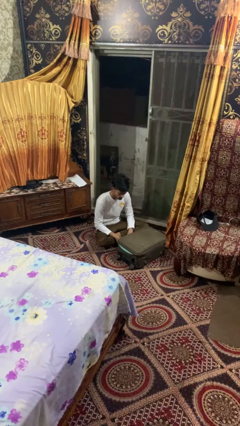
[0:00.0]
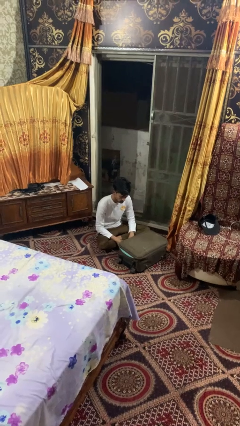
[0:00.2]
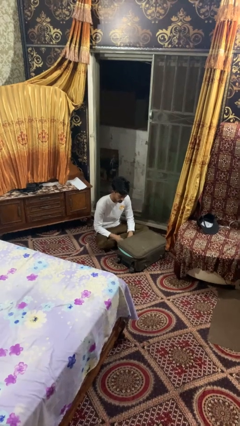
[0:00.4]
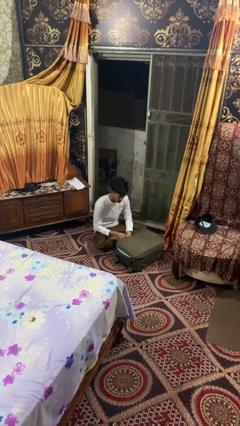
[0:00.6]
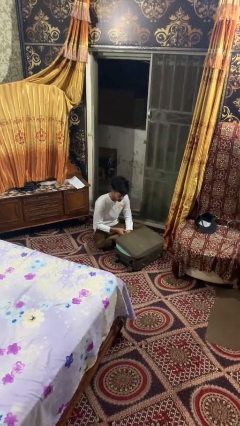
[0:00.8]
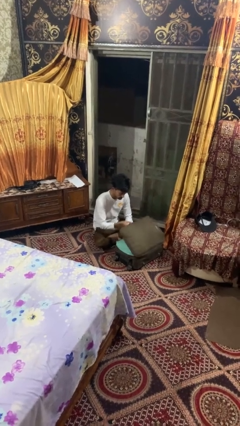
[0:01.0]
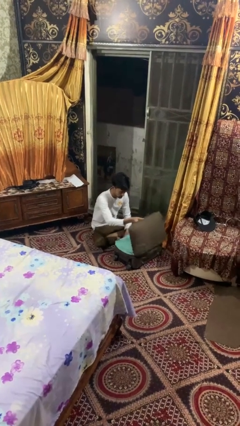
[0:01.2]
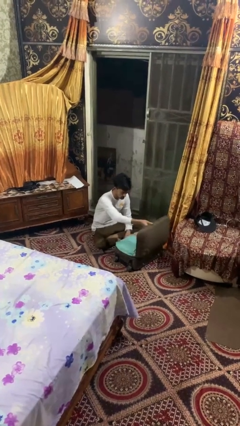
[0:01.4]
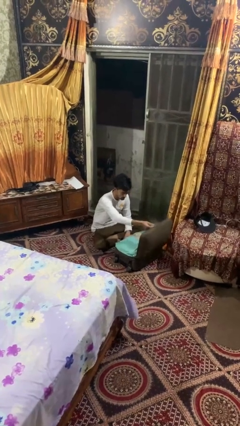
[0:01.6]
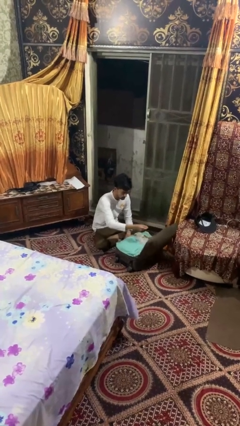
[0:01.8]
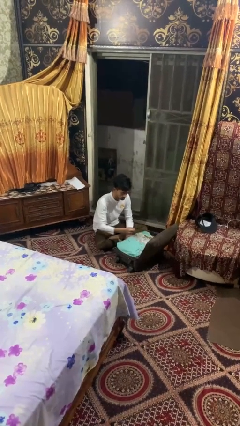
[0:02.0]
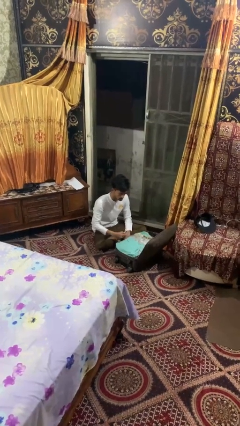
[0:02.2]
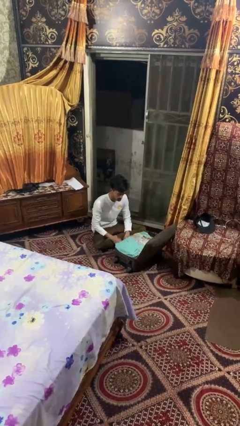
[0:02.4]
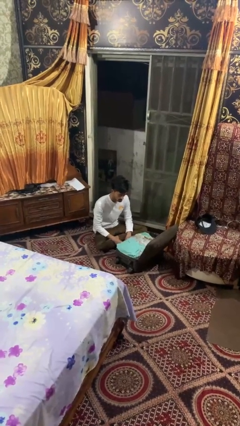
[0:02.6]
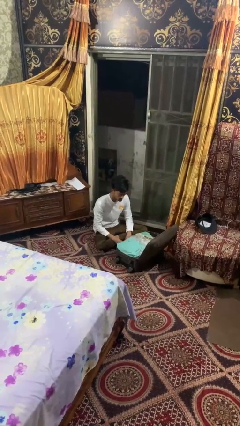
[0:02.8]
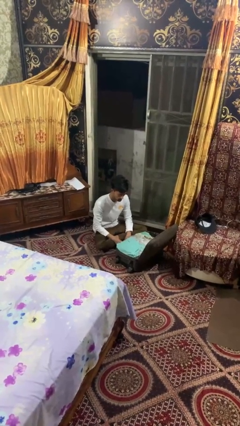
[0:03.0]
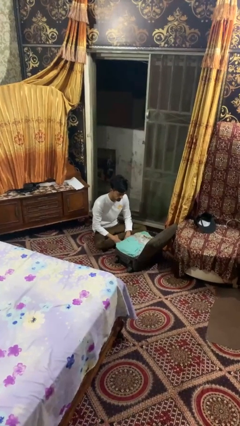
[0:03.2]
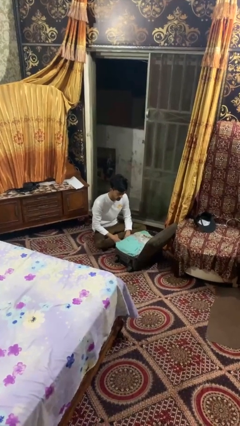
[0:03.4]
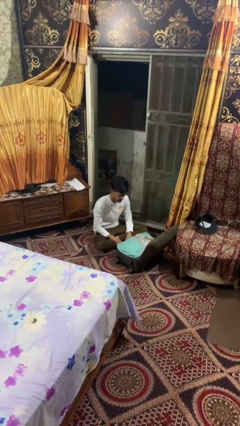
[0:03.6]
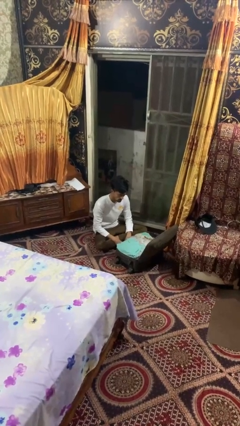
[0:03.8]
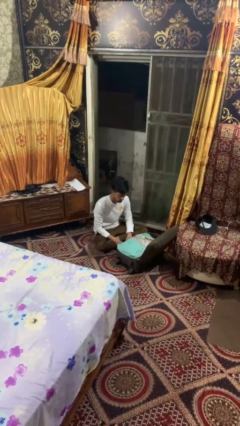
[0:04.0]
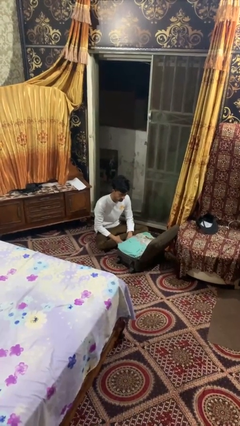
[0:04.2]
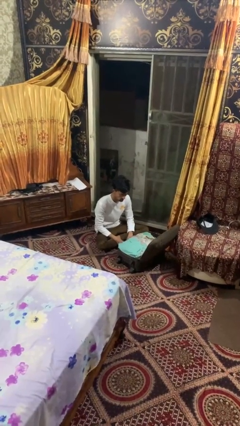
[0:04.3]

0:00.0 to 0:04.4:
person opens suitcase

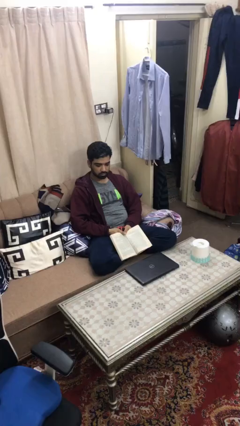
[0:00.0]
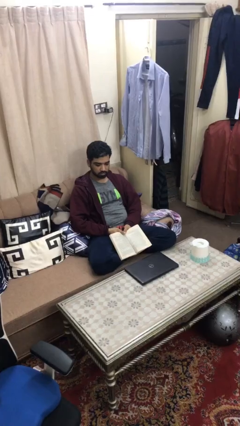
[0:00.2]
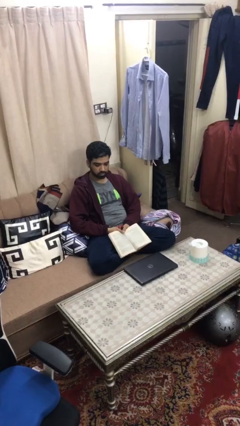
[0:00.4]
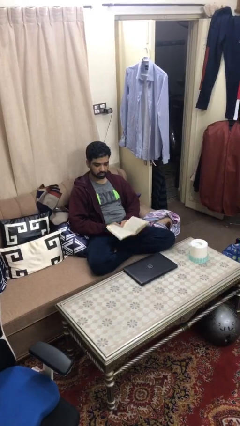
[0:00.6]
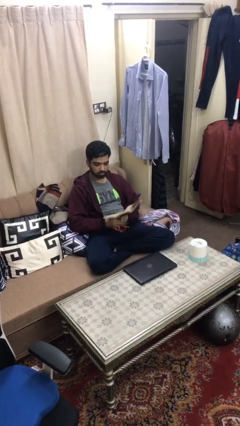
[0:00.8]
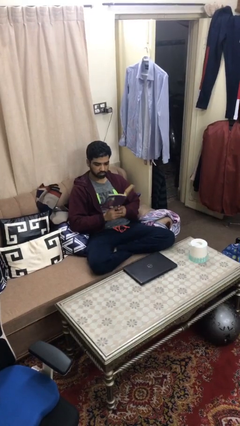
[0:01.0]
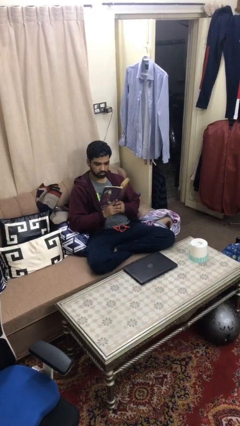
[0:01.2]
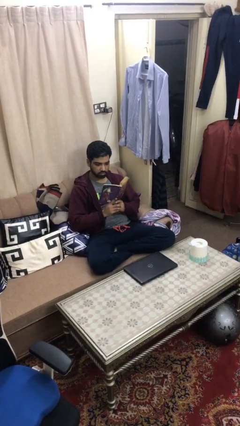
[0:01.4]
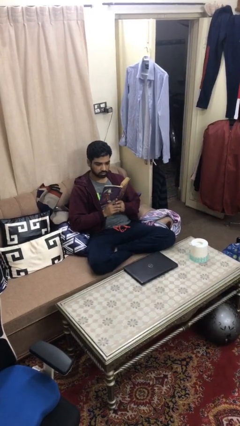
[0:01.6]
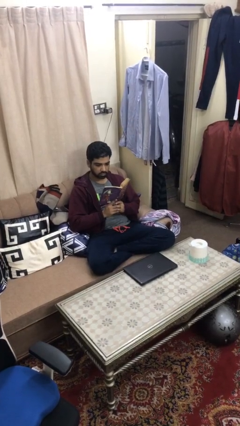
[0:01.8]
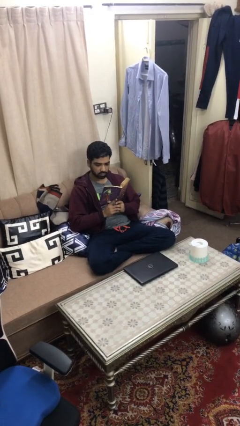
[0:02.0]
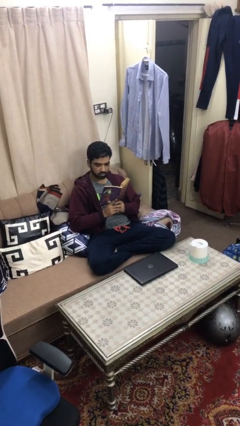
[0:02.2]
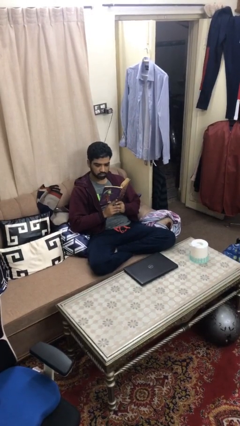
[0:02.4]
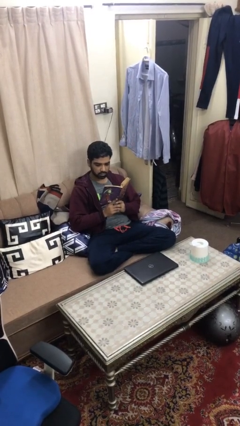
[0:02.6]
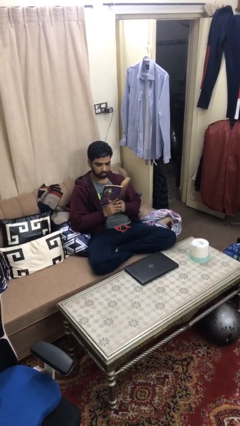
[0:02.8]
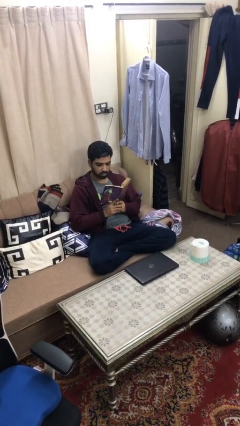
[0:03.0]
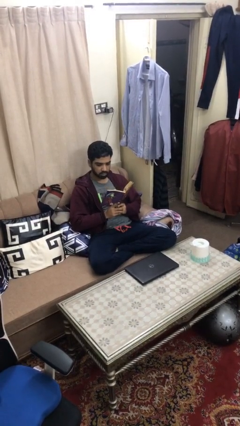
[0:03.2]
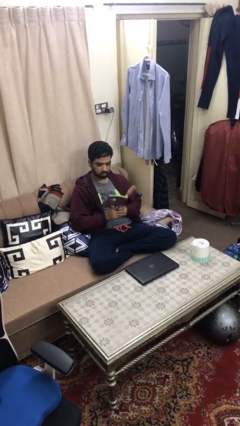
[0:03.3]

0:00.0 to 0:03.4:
person reads document

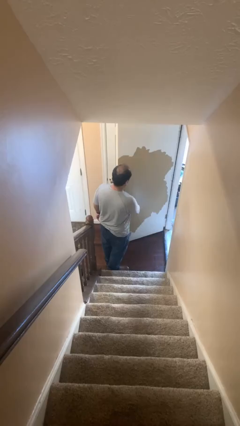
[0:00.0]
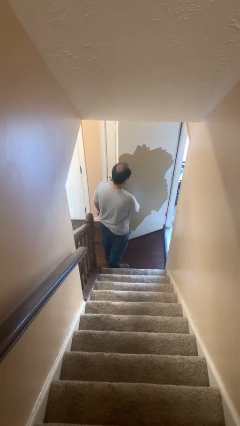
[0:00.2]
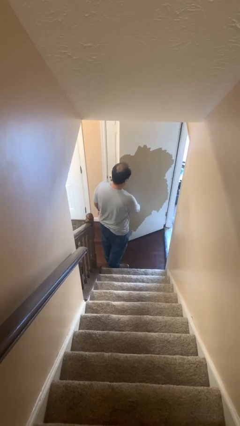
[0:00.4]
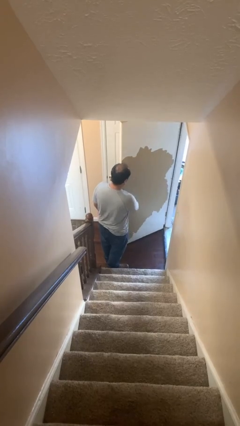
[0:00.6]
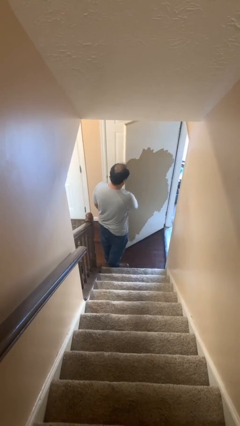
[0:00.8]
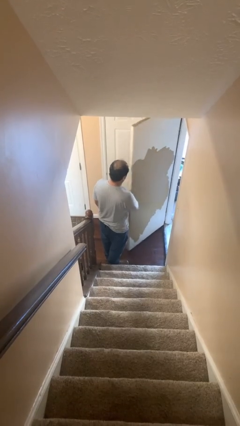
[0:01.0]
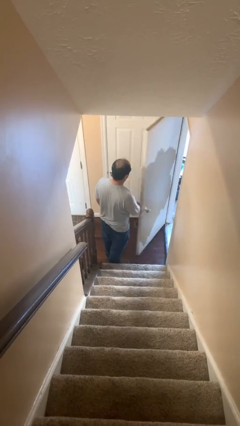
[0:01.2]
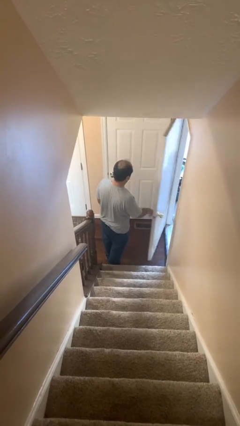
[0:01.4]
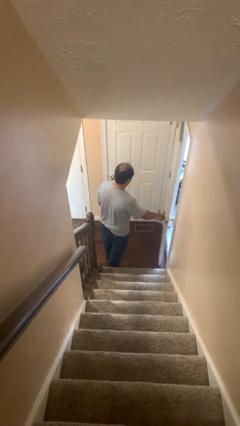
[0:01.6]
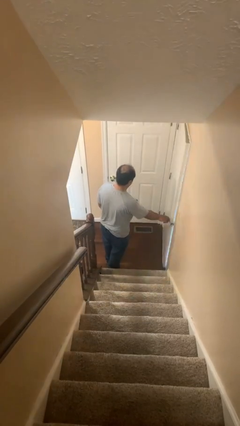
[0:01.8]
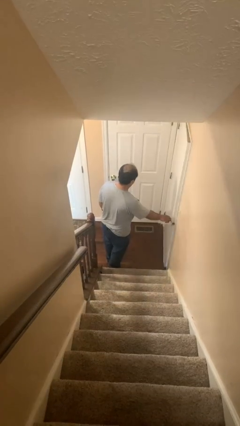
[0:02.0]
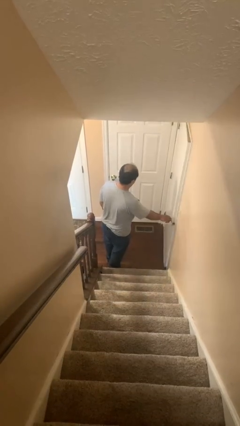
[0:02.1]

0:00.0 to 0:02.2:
person closes facility door

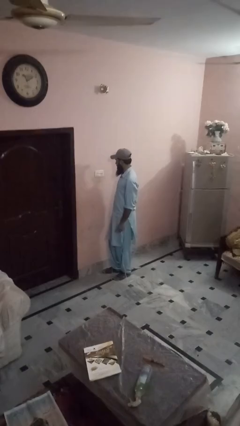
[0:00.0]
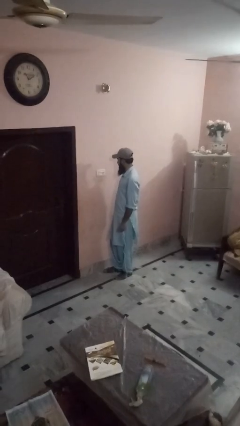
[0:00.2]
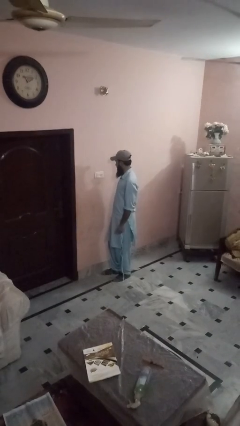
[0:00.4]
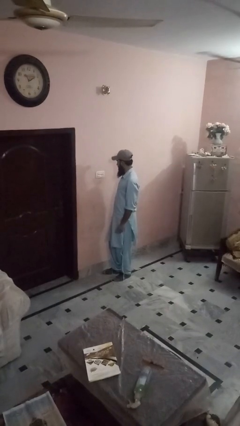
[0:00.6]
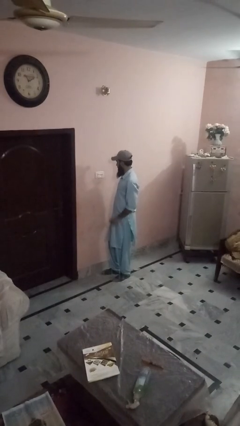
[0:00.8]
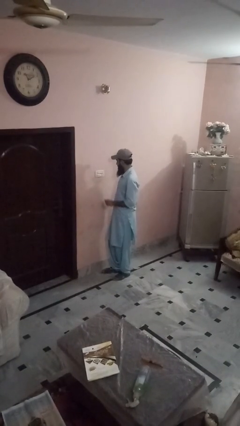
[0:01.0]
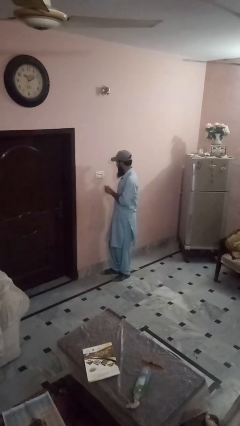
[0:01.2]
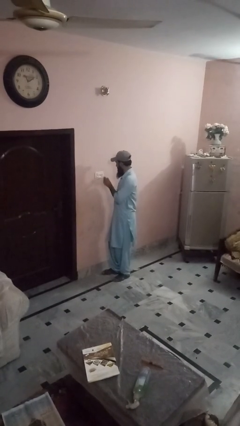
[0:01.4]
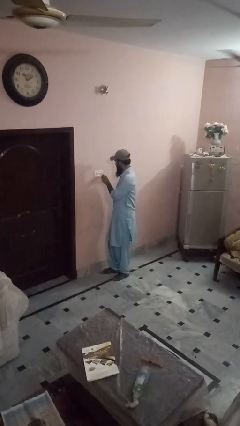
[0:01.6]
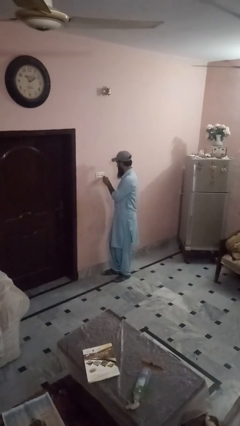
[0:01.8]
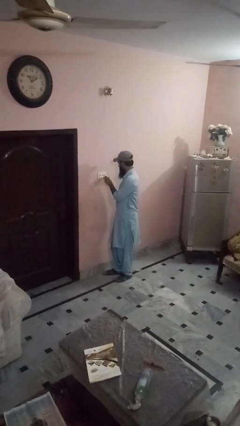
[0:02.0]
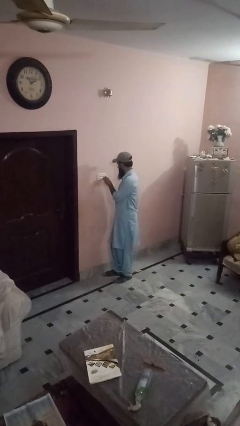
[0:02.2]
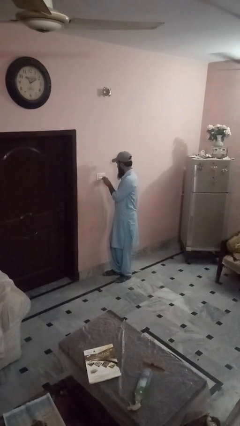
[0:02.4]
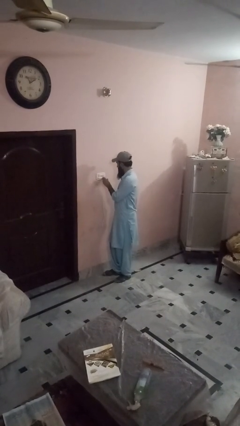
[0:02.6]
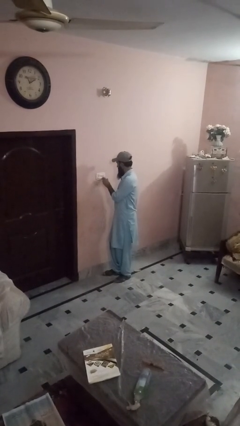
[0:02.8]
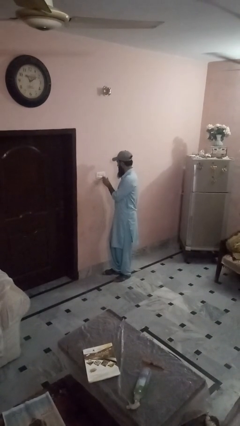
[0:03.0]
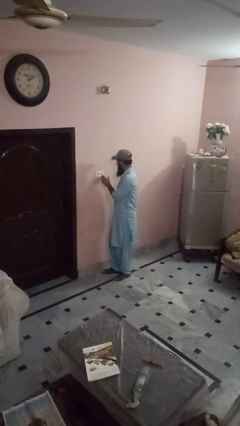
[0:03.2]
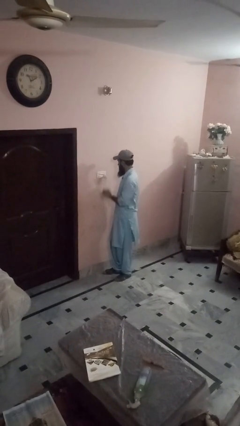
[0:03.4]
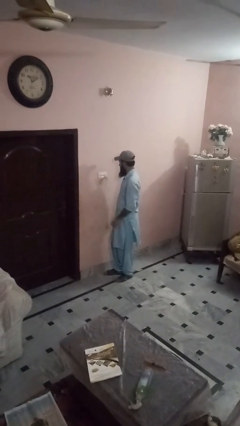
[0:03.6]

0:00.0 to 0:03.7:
person plugs into electrical socket

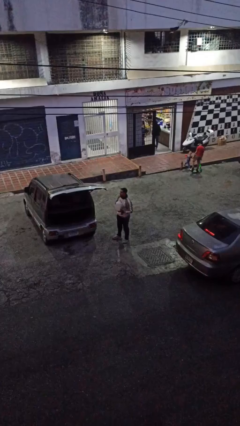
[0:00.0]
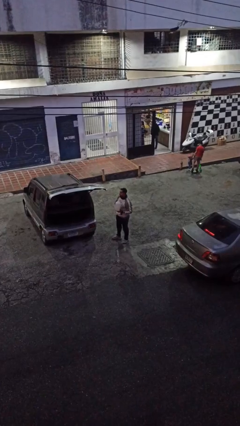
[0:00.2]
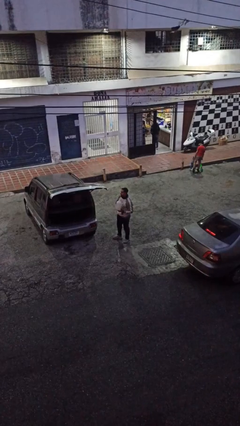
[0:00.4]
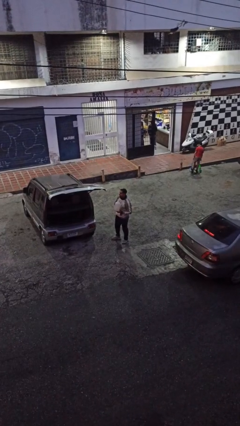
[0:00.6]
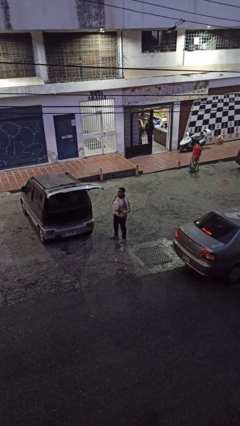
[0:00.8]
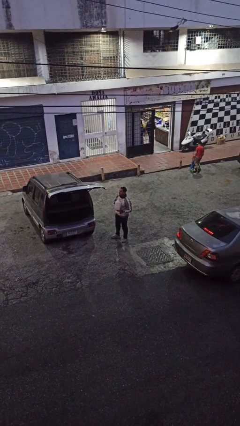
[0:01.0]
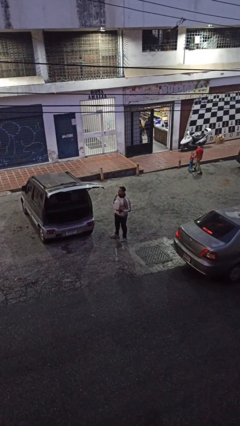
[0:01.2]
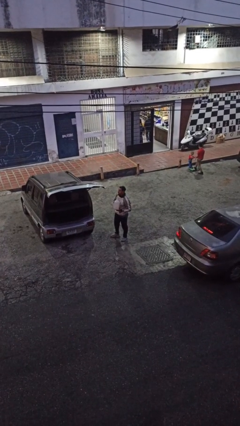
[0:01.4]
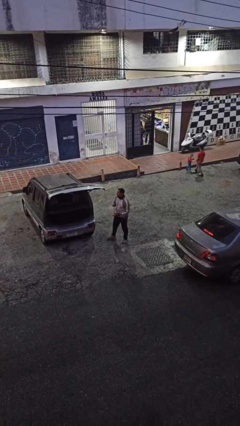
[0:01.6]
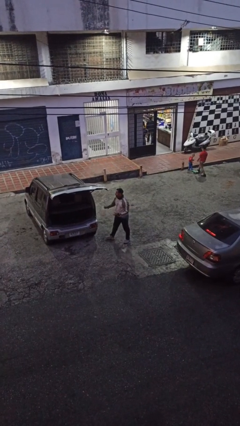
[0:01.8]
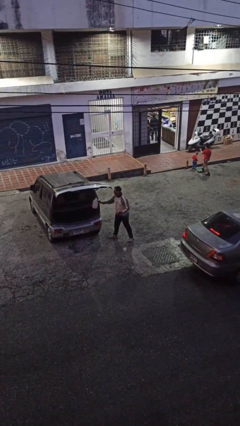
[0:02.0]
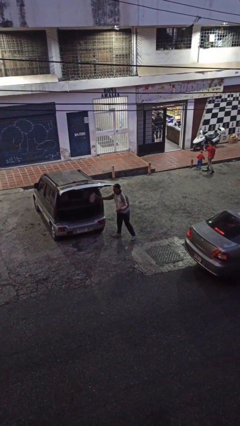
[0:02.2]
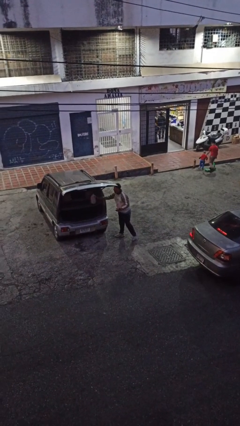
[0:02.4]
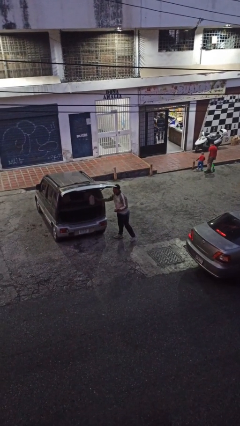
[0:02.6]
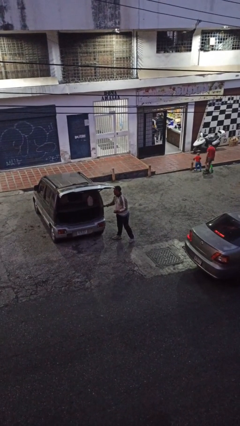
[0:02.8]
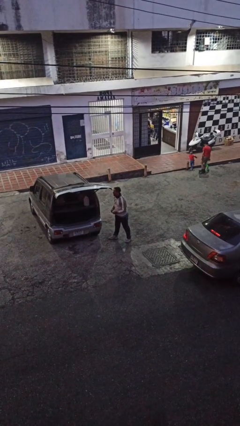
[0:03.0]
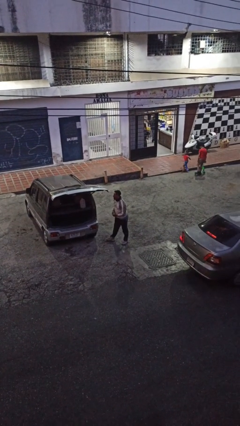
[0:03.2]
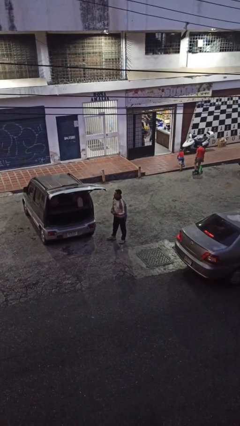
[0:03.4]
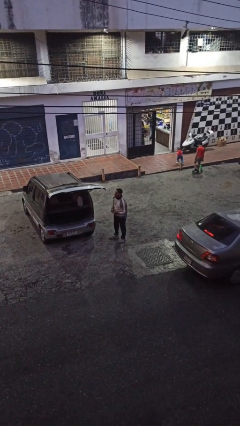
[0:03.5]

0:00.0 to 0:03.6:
person loads car

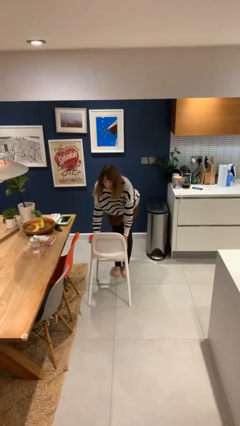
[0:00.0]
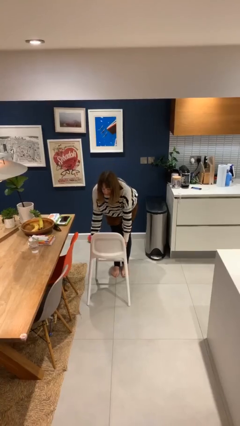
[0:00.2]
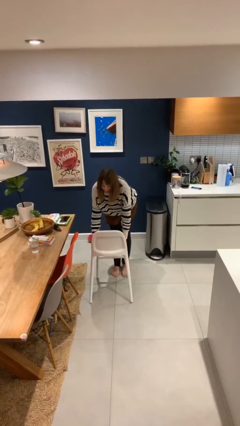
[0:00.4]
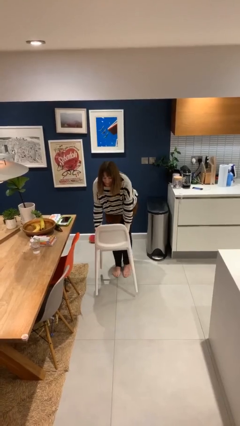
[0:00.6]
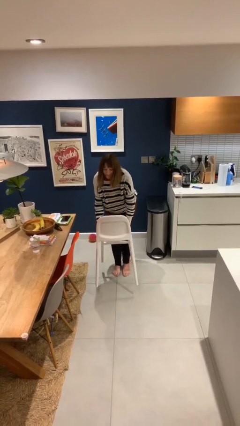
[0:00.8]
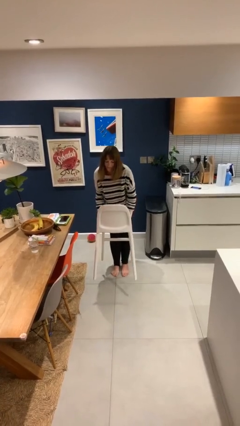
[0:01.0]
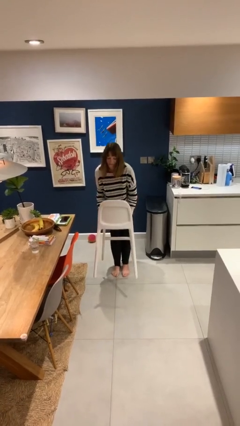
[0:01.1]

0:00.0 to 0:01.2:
person picks up object from floor
